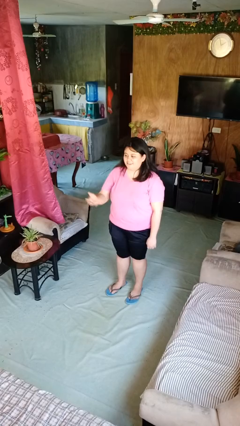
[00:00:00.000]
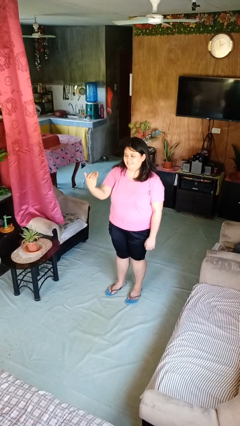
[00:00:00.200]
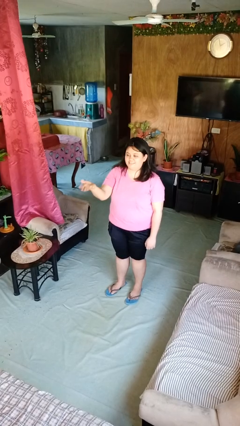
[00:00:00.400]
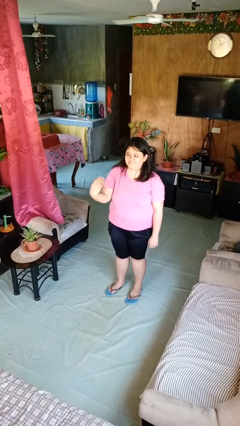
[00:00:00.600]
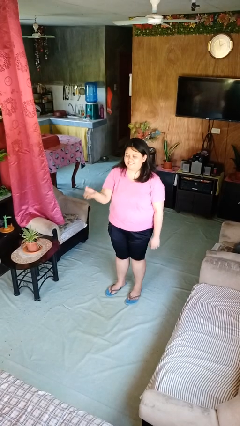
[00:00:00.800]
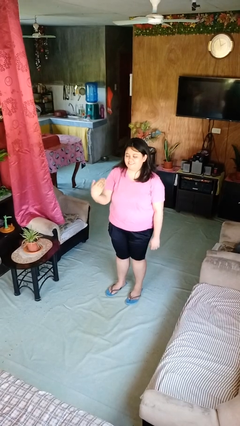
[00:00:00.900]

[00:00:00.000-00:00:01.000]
person gestures come here

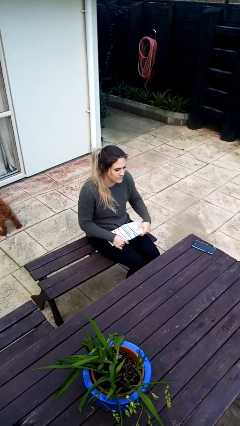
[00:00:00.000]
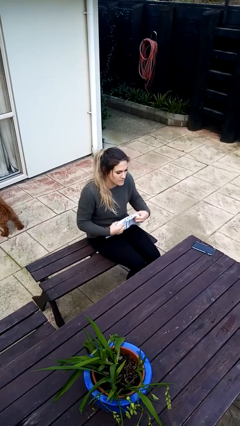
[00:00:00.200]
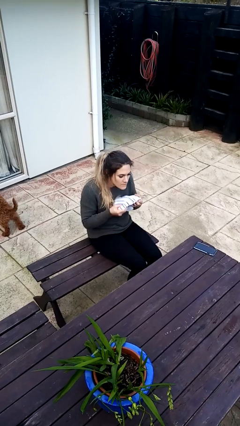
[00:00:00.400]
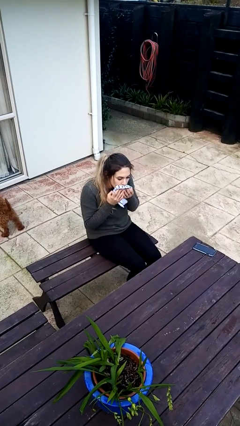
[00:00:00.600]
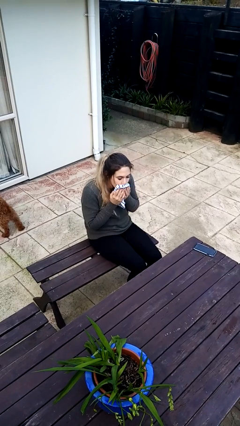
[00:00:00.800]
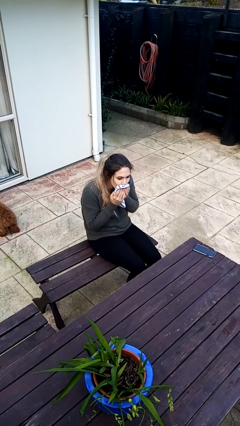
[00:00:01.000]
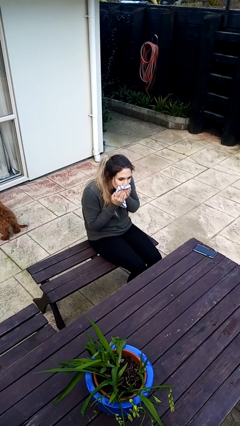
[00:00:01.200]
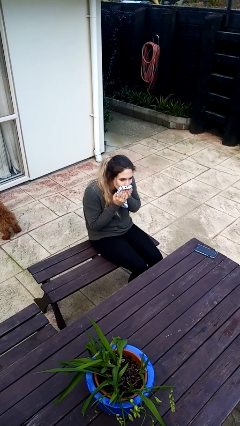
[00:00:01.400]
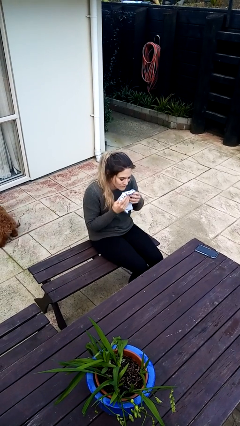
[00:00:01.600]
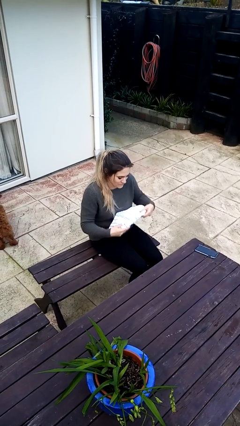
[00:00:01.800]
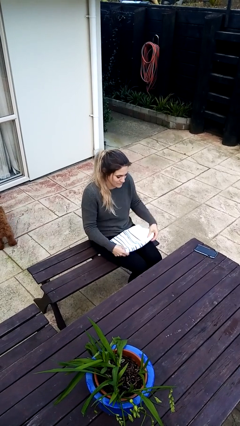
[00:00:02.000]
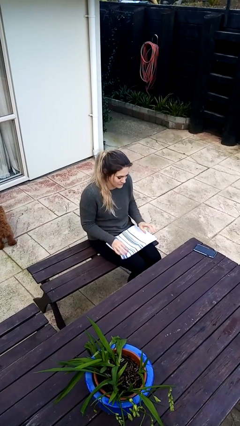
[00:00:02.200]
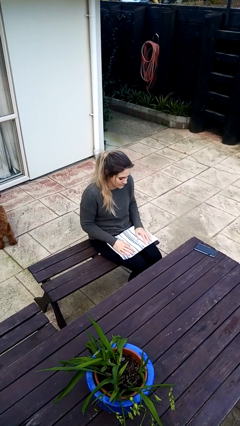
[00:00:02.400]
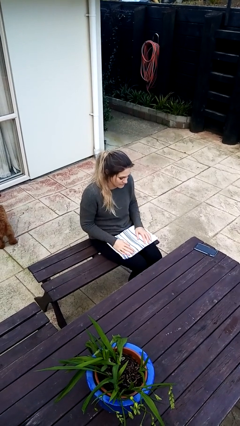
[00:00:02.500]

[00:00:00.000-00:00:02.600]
person wipes mouth with napkin

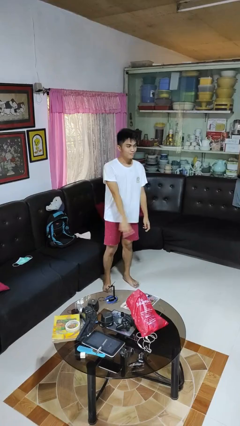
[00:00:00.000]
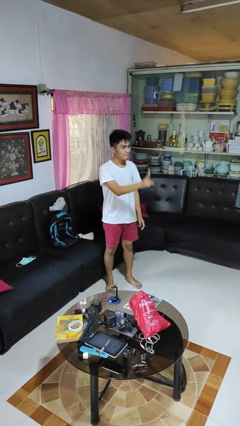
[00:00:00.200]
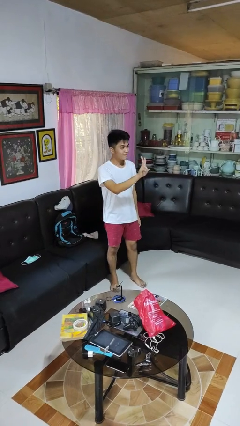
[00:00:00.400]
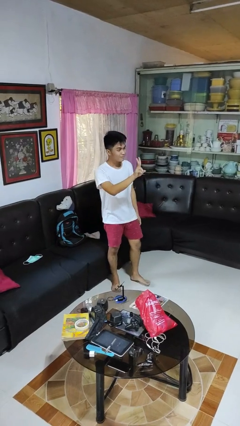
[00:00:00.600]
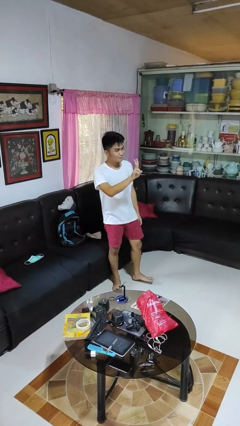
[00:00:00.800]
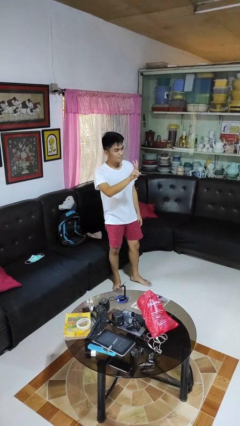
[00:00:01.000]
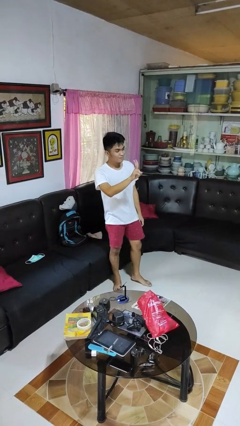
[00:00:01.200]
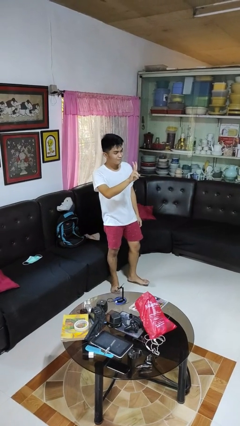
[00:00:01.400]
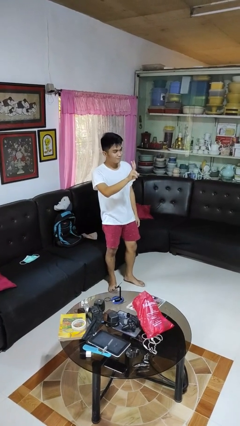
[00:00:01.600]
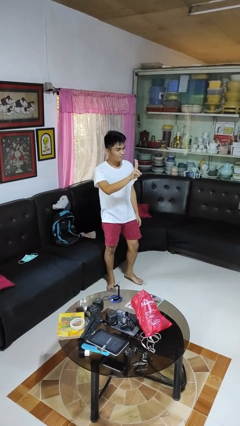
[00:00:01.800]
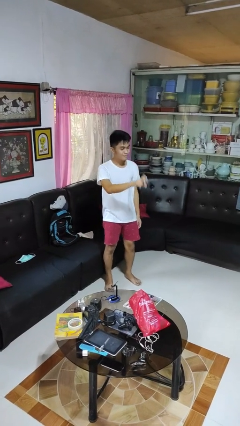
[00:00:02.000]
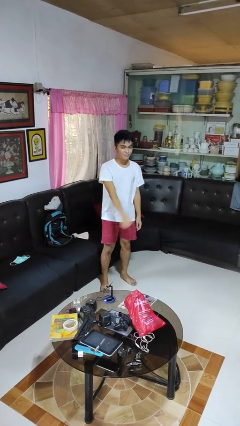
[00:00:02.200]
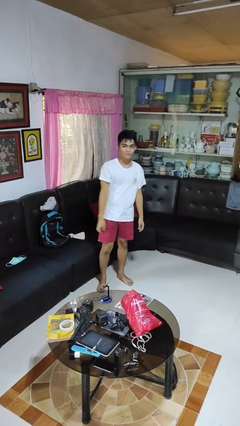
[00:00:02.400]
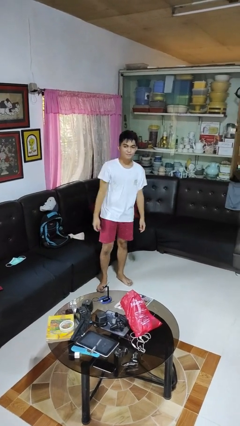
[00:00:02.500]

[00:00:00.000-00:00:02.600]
person gestures peace

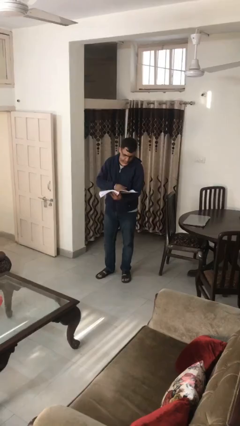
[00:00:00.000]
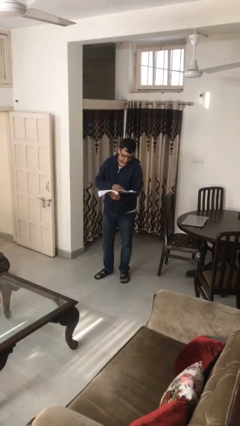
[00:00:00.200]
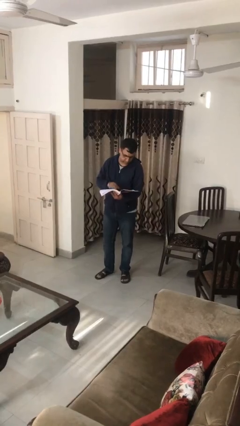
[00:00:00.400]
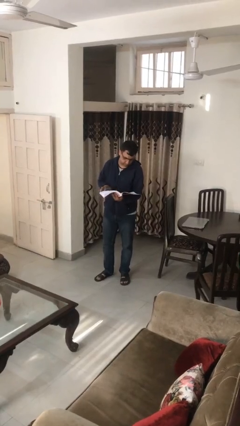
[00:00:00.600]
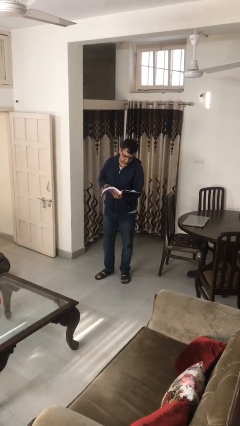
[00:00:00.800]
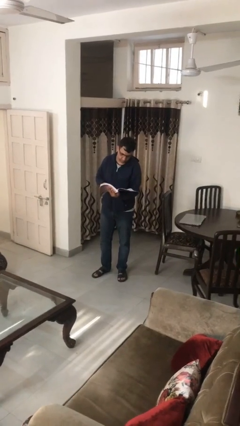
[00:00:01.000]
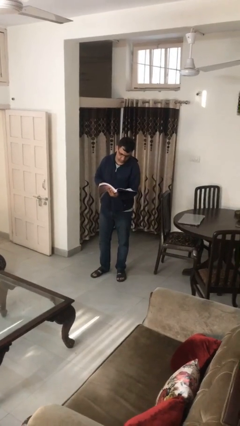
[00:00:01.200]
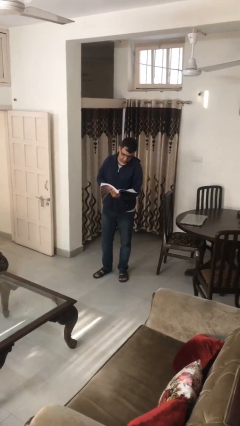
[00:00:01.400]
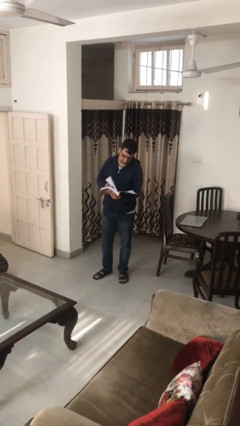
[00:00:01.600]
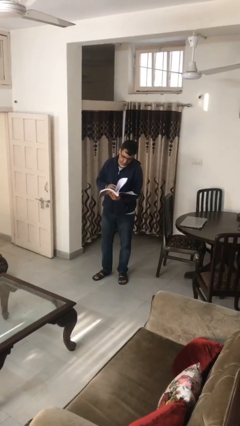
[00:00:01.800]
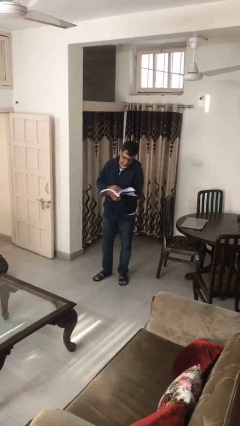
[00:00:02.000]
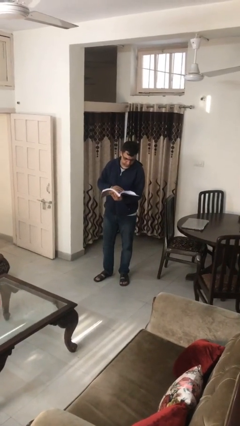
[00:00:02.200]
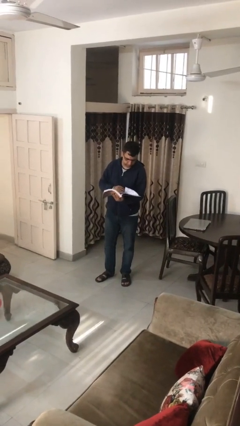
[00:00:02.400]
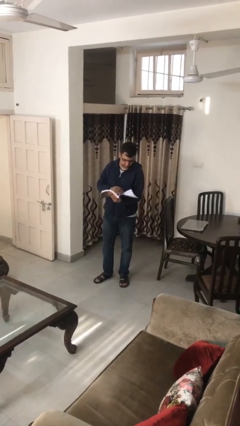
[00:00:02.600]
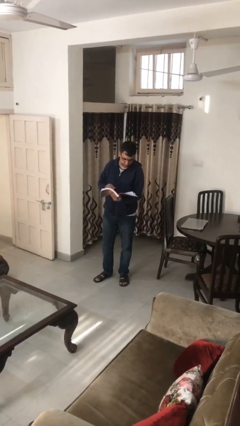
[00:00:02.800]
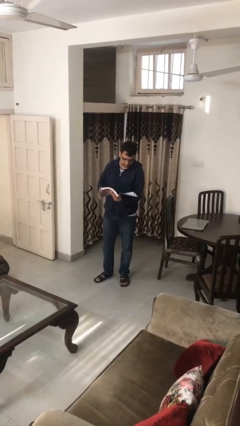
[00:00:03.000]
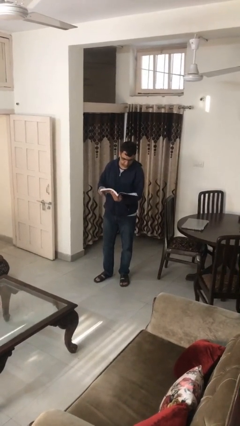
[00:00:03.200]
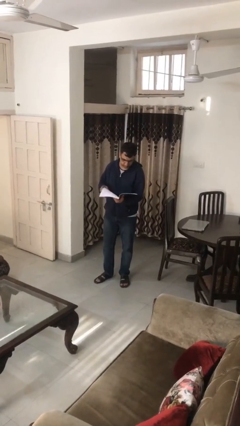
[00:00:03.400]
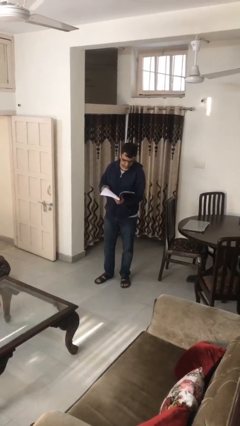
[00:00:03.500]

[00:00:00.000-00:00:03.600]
person reads document

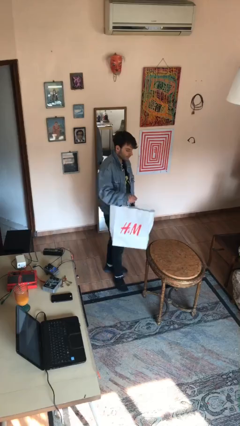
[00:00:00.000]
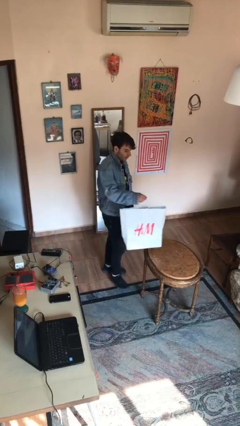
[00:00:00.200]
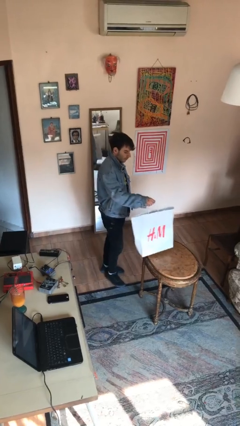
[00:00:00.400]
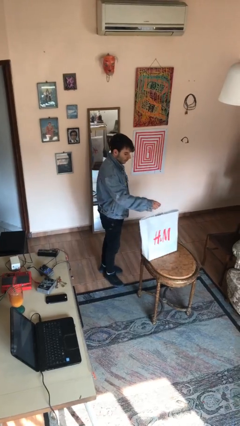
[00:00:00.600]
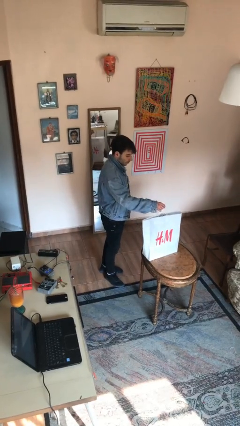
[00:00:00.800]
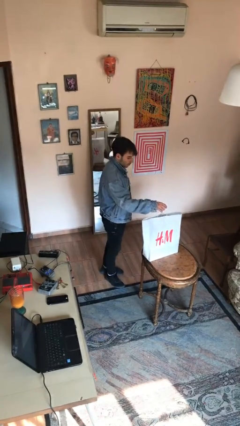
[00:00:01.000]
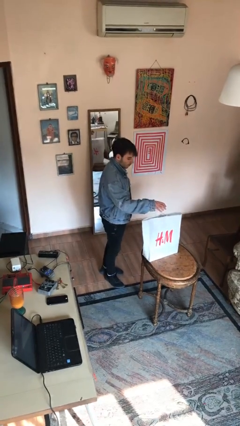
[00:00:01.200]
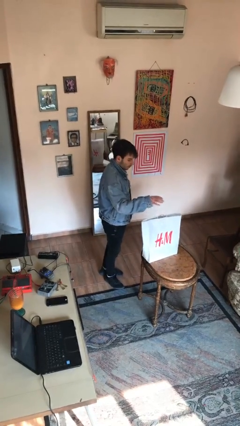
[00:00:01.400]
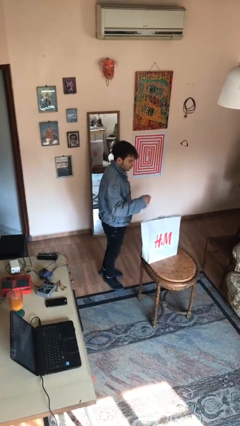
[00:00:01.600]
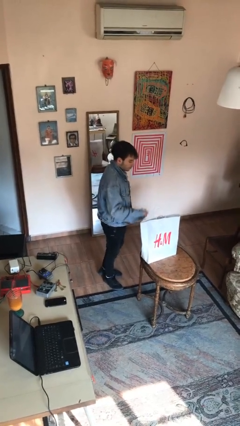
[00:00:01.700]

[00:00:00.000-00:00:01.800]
person puts down object on table

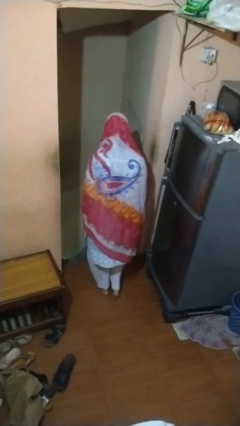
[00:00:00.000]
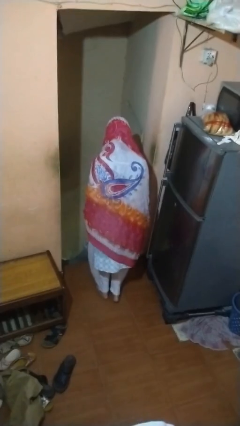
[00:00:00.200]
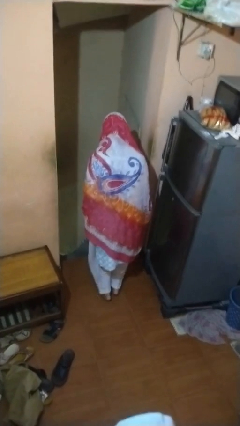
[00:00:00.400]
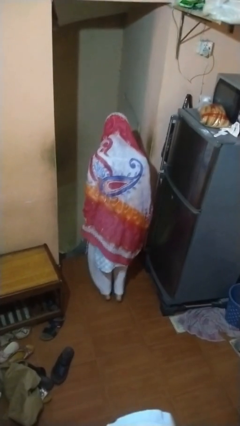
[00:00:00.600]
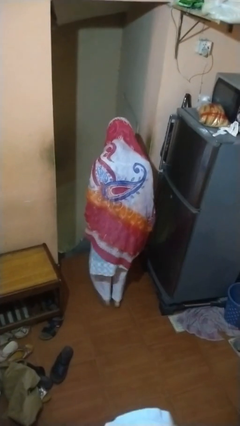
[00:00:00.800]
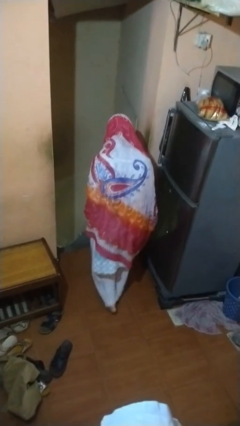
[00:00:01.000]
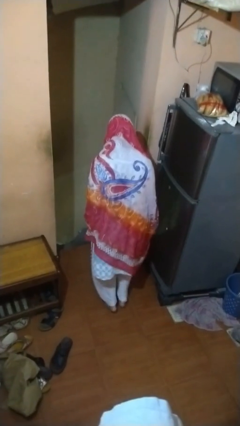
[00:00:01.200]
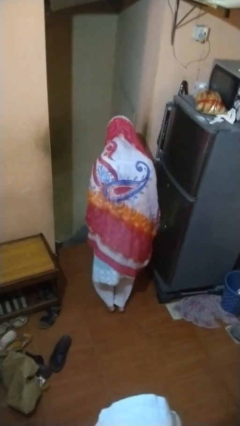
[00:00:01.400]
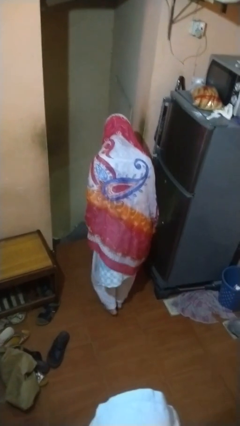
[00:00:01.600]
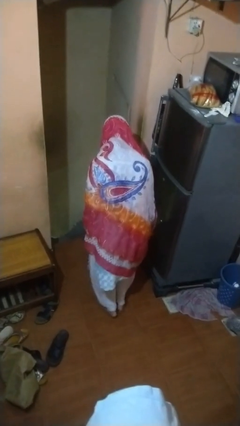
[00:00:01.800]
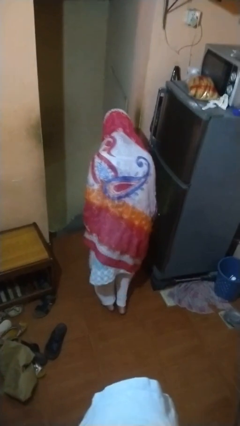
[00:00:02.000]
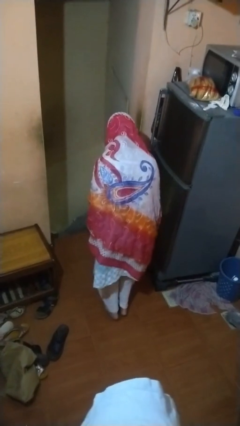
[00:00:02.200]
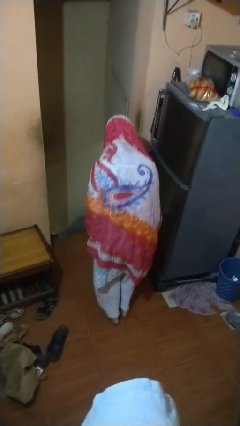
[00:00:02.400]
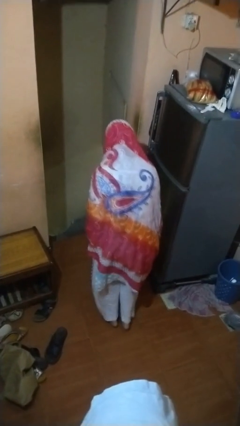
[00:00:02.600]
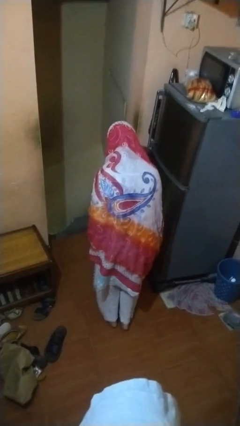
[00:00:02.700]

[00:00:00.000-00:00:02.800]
person walks tiptoe

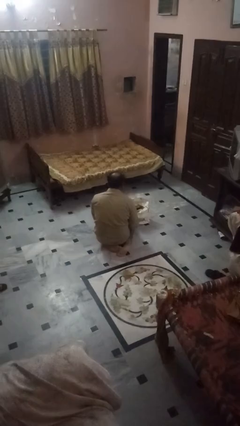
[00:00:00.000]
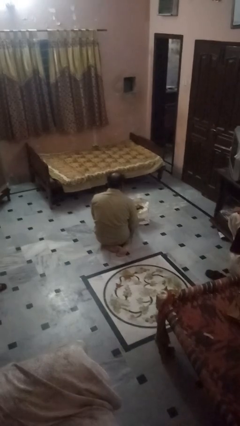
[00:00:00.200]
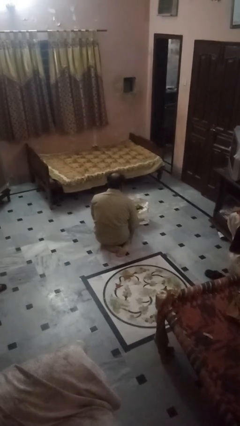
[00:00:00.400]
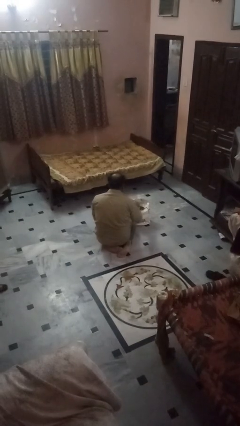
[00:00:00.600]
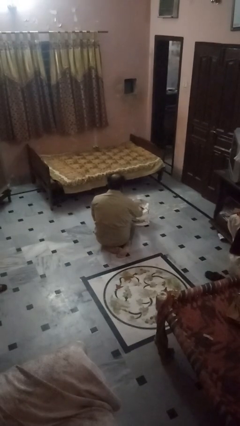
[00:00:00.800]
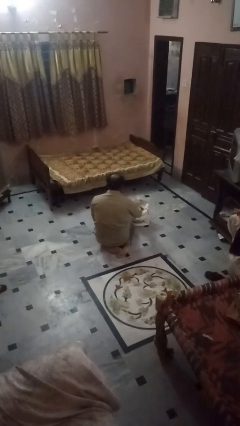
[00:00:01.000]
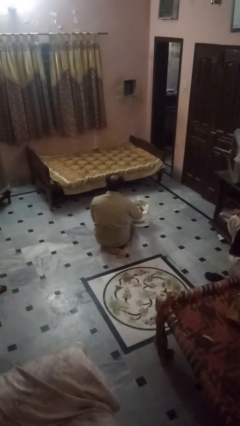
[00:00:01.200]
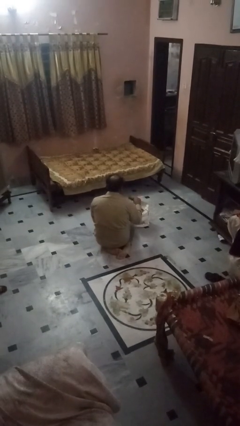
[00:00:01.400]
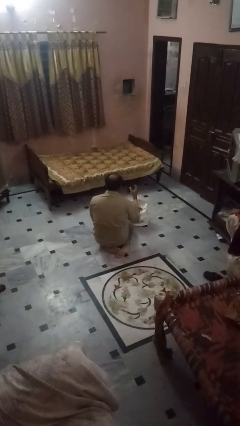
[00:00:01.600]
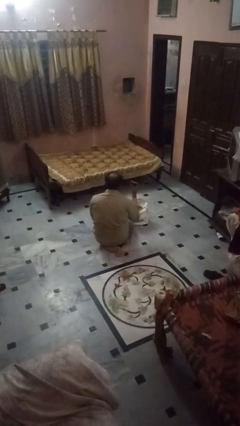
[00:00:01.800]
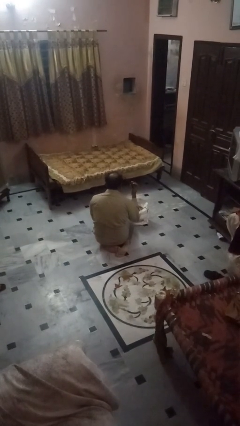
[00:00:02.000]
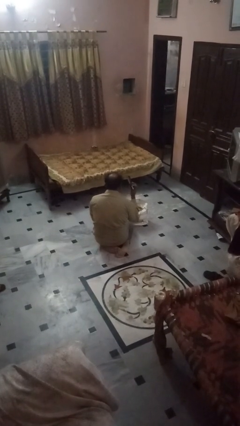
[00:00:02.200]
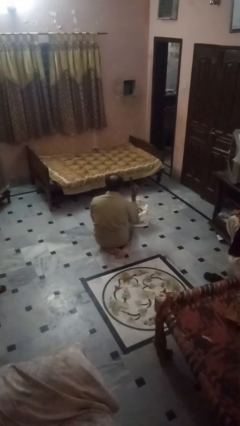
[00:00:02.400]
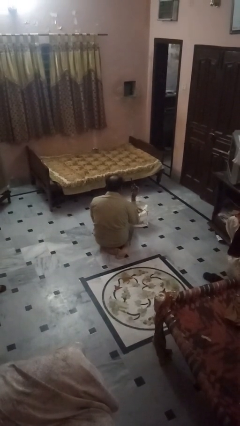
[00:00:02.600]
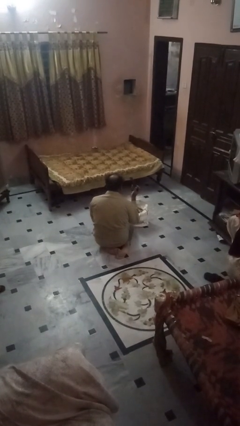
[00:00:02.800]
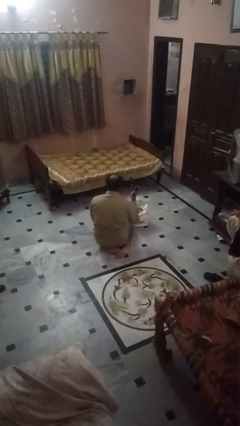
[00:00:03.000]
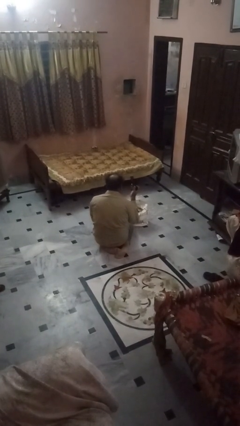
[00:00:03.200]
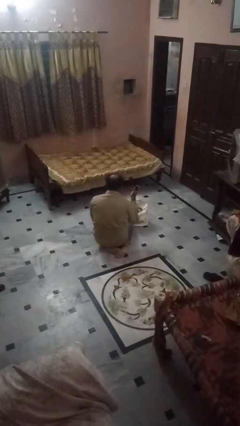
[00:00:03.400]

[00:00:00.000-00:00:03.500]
person takes object from bag
